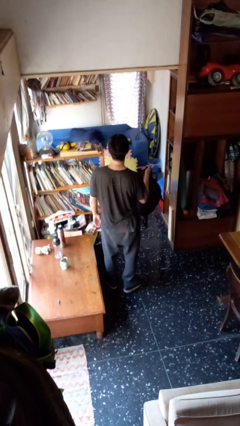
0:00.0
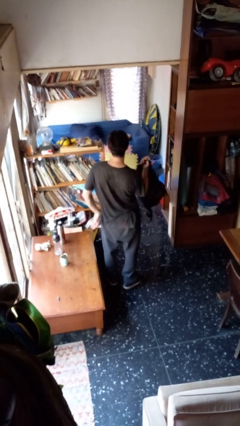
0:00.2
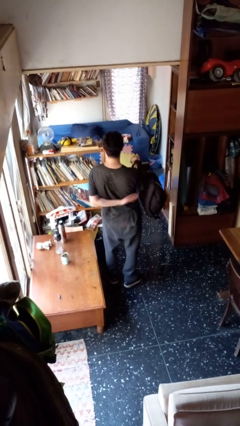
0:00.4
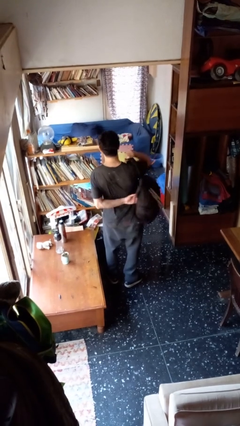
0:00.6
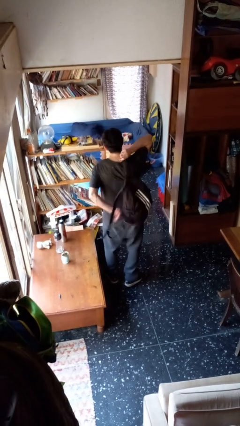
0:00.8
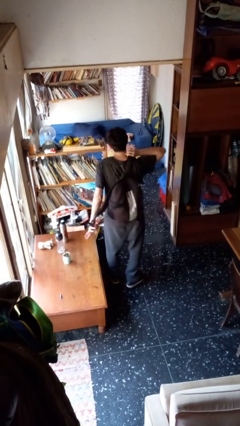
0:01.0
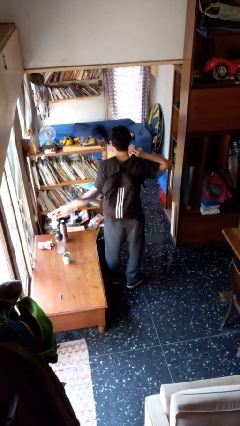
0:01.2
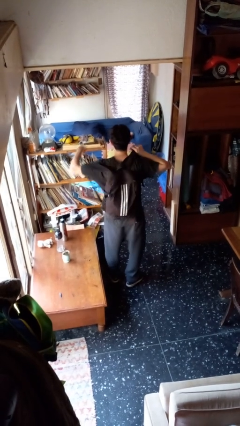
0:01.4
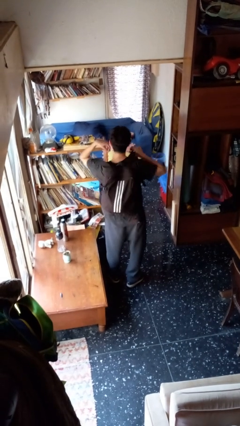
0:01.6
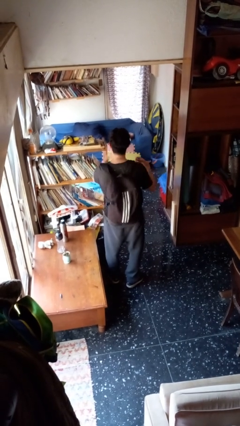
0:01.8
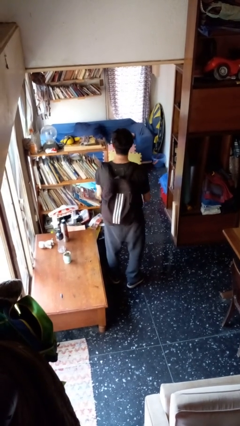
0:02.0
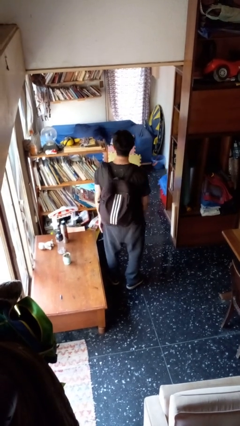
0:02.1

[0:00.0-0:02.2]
person puts on backpack

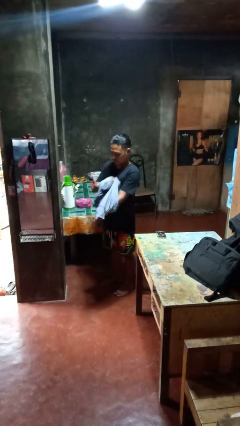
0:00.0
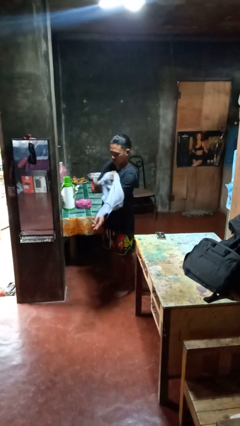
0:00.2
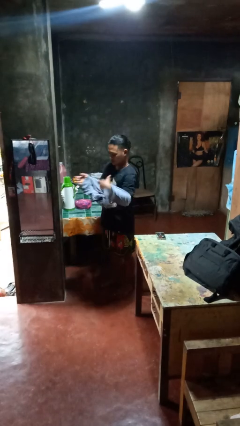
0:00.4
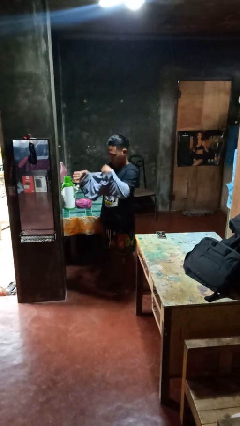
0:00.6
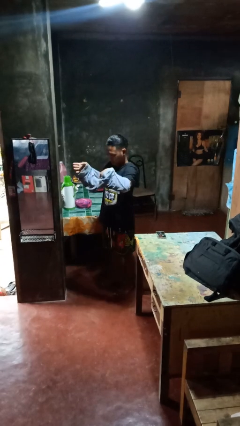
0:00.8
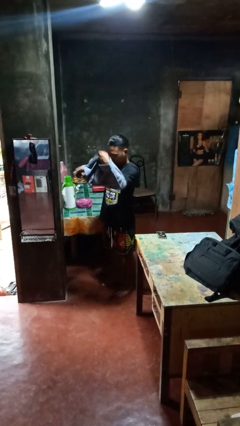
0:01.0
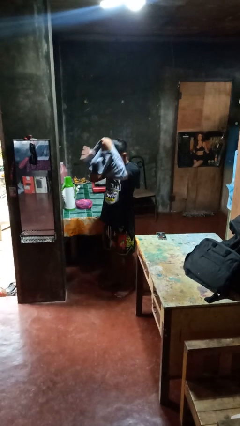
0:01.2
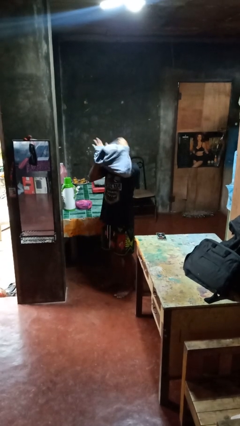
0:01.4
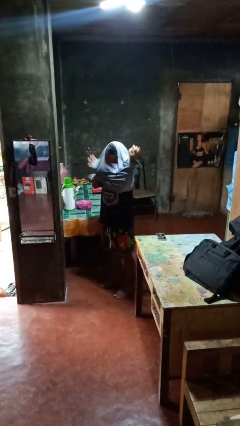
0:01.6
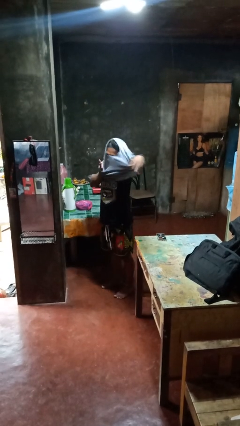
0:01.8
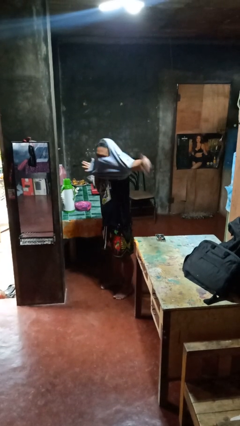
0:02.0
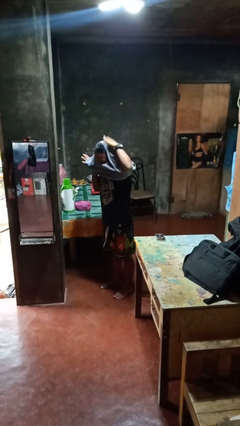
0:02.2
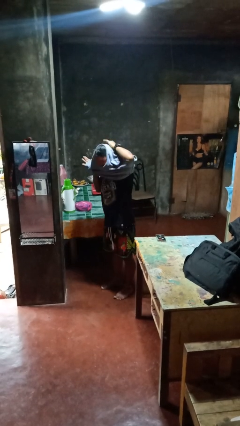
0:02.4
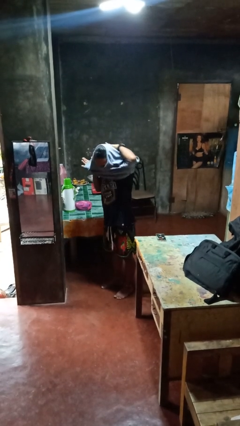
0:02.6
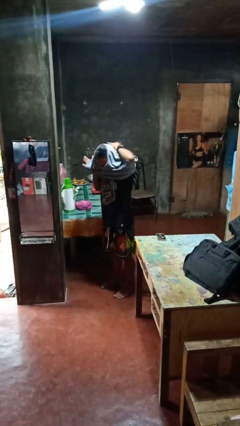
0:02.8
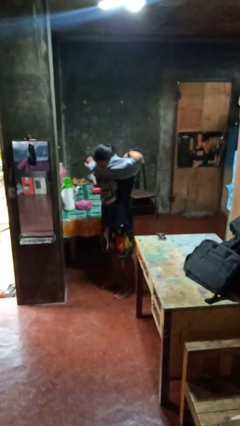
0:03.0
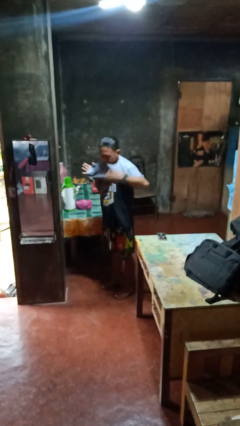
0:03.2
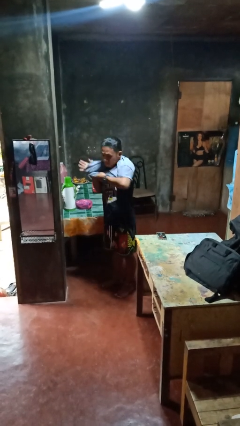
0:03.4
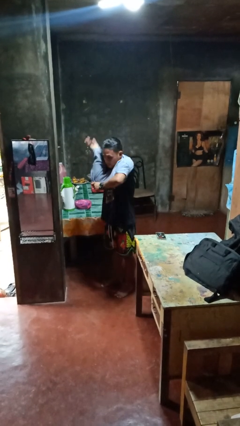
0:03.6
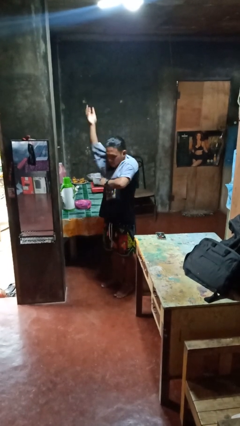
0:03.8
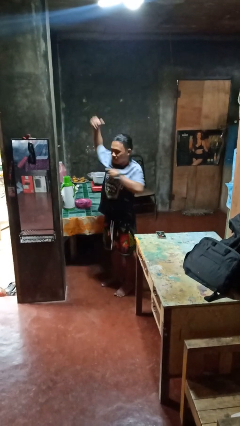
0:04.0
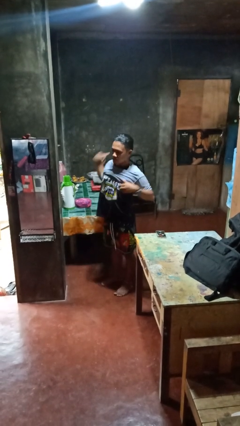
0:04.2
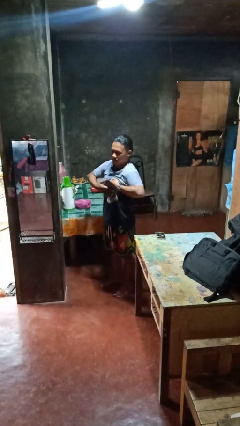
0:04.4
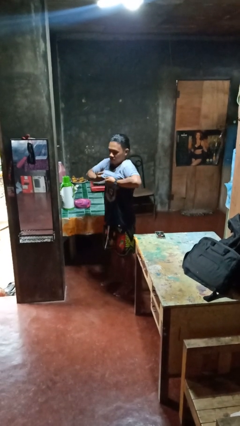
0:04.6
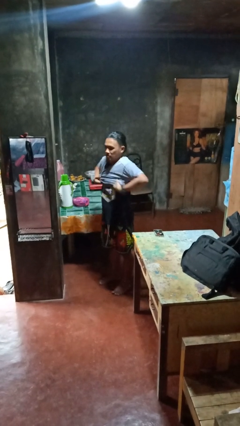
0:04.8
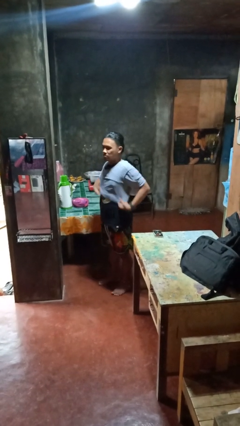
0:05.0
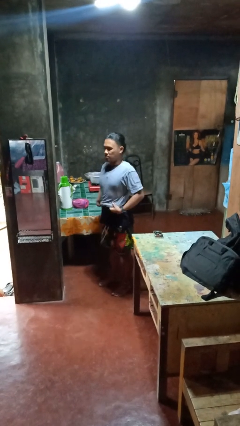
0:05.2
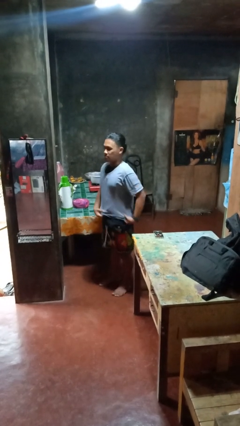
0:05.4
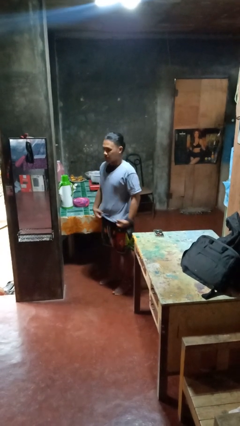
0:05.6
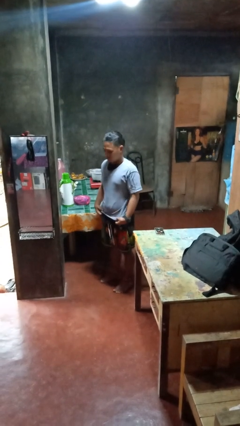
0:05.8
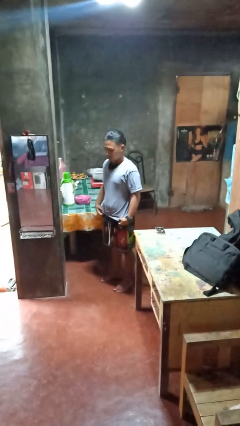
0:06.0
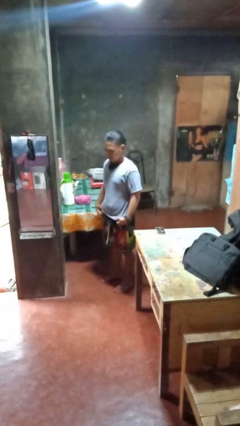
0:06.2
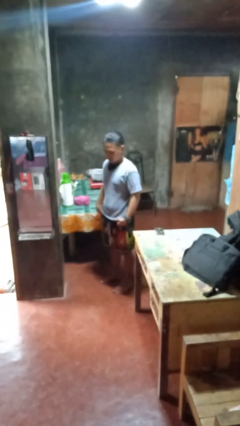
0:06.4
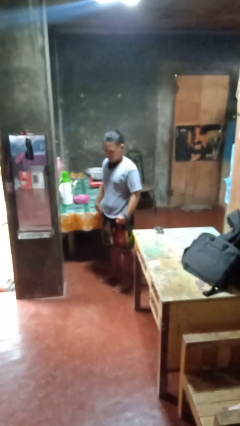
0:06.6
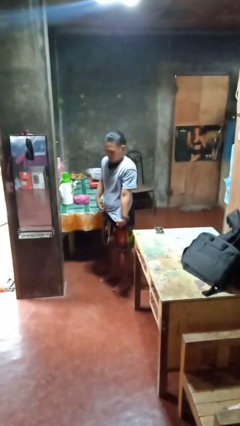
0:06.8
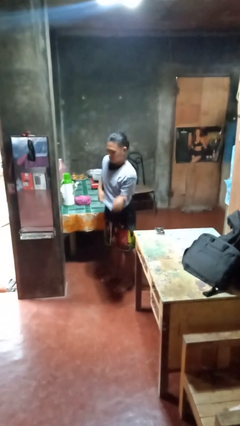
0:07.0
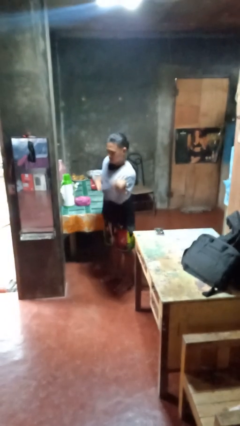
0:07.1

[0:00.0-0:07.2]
person puts on shirt

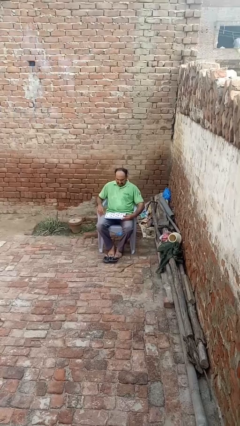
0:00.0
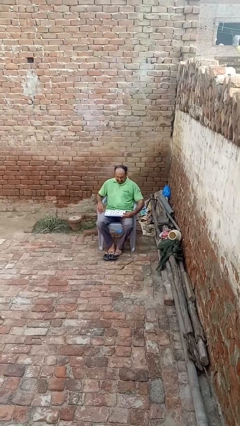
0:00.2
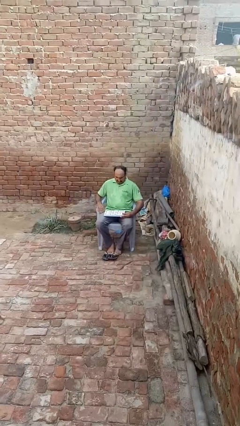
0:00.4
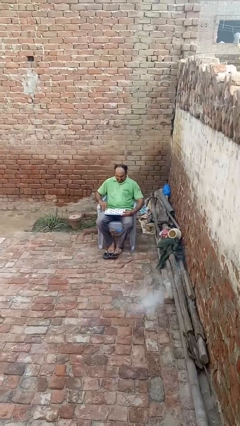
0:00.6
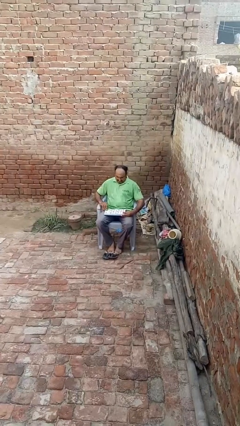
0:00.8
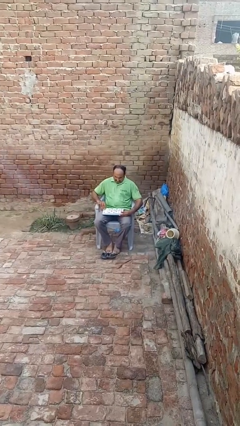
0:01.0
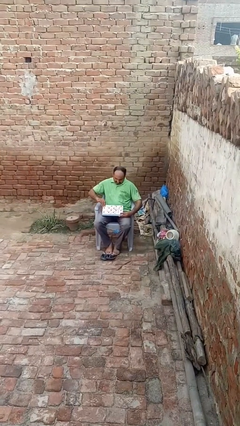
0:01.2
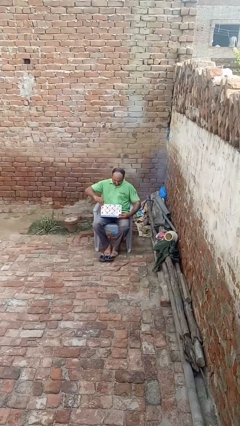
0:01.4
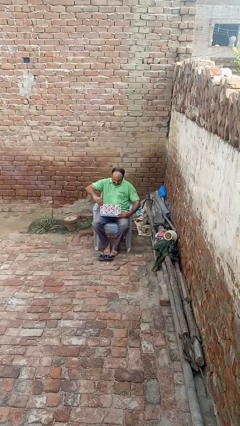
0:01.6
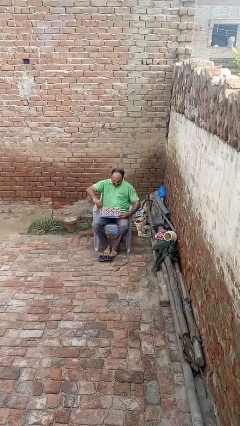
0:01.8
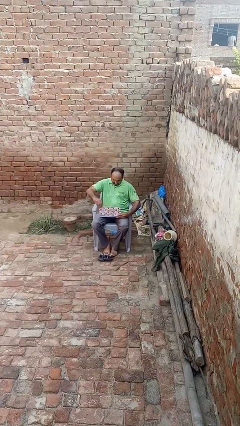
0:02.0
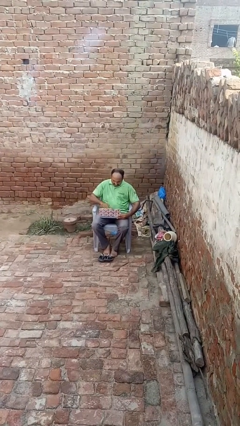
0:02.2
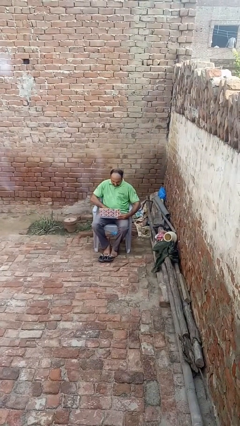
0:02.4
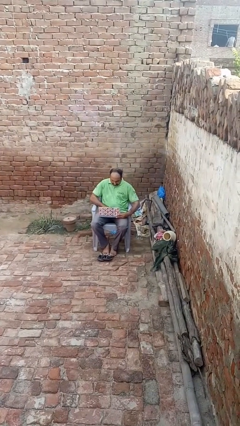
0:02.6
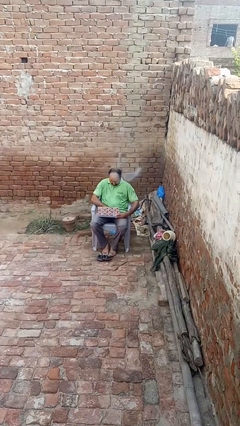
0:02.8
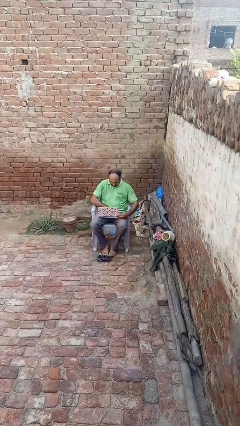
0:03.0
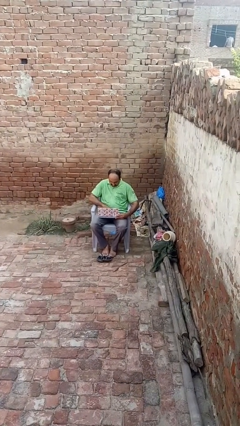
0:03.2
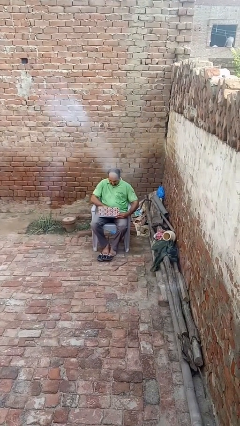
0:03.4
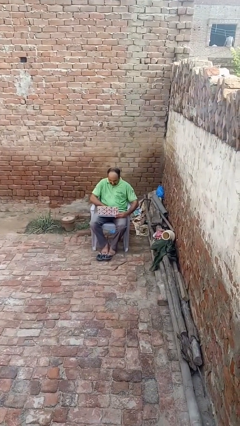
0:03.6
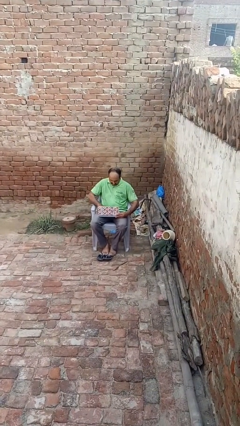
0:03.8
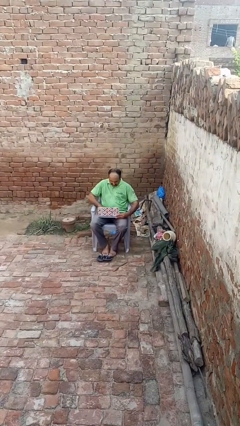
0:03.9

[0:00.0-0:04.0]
person opens laptop

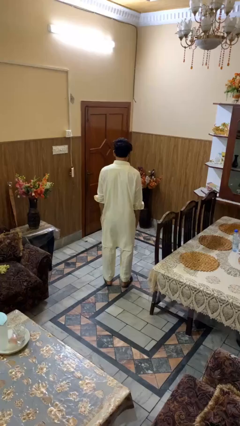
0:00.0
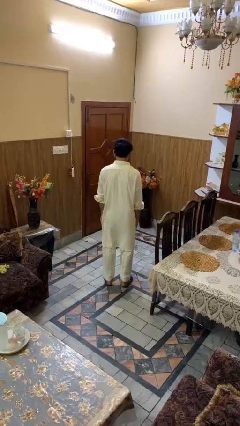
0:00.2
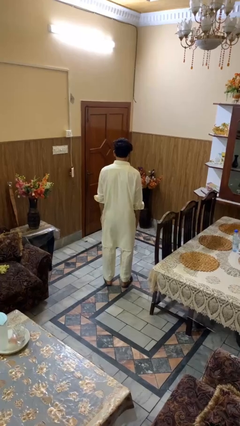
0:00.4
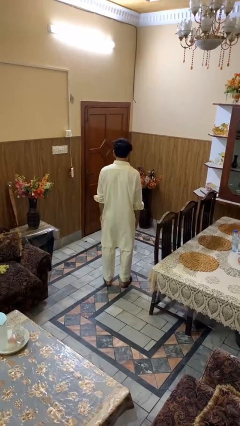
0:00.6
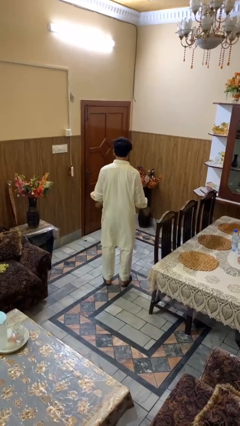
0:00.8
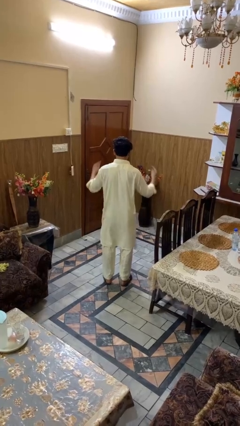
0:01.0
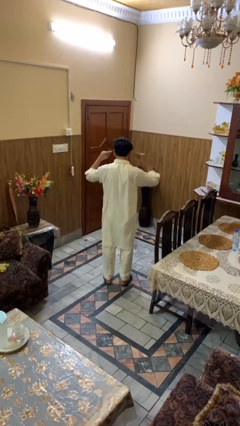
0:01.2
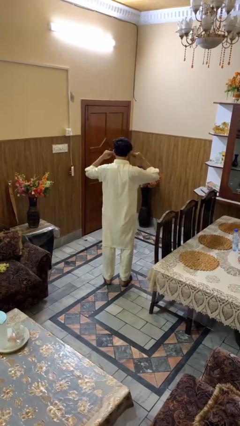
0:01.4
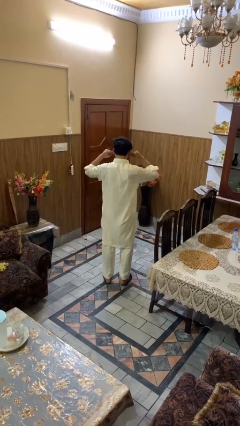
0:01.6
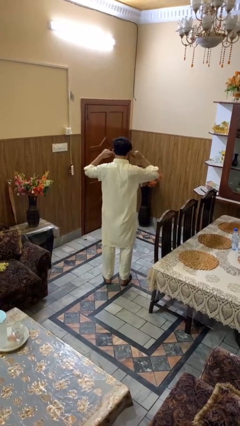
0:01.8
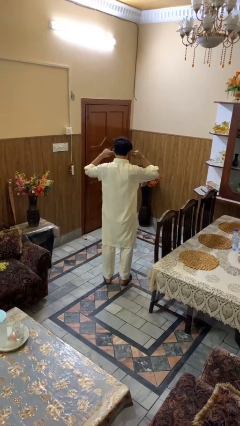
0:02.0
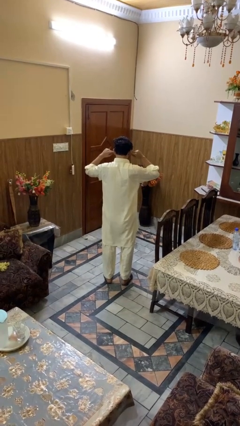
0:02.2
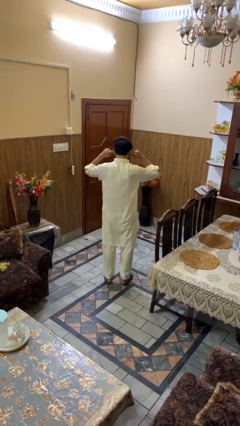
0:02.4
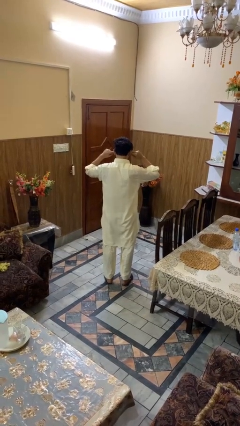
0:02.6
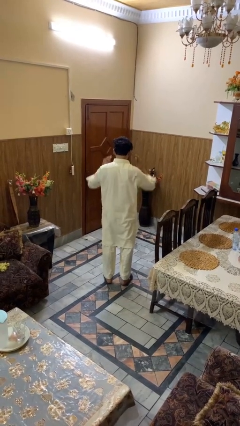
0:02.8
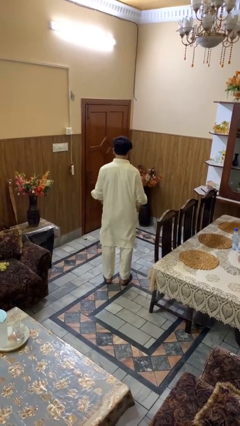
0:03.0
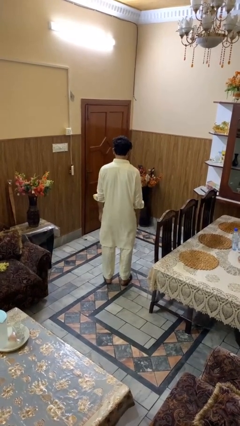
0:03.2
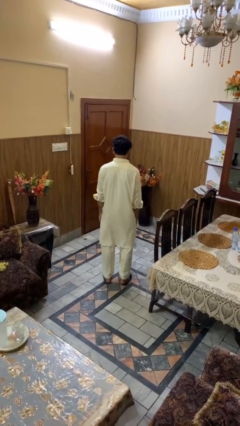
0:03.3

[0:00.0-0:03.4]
person puts fingers in ear

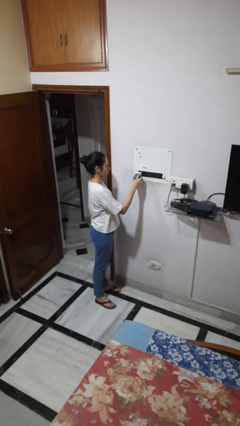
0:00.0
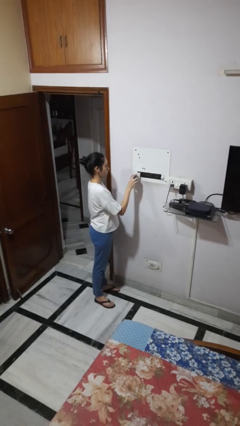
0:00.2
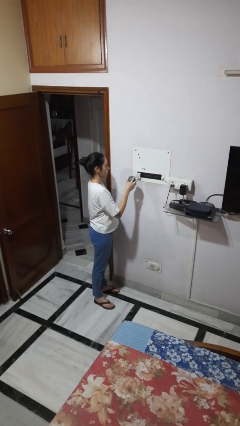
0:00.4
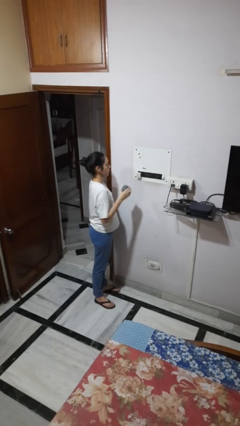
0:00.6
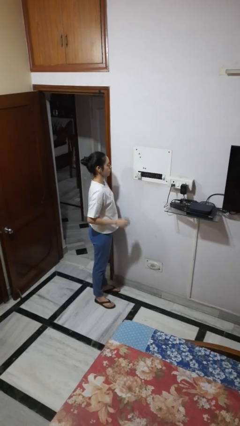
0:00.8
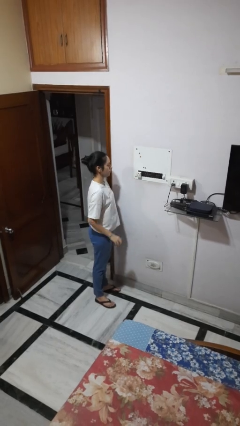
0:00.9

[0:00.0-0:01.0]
person unplugs from electrical socket
